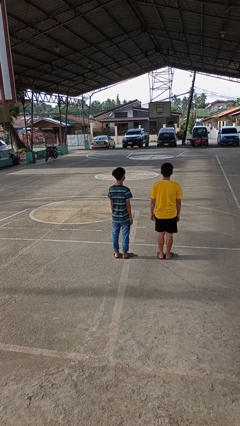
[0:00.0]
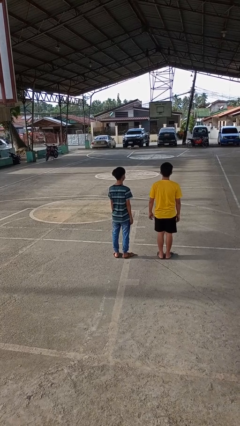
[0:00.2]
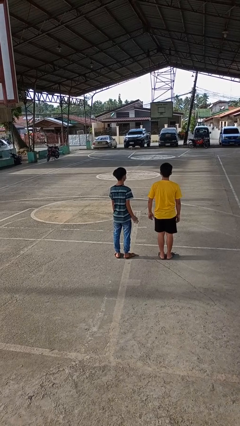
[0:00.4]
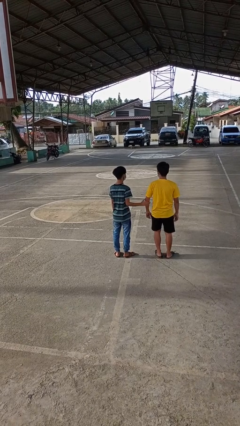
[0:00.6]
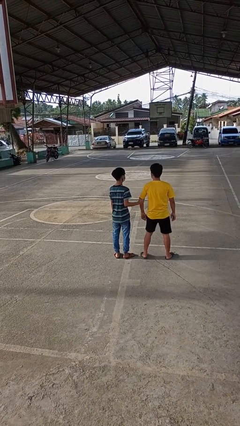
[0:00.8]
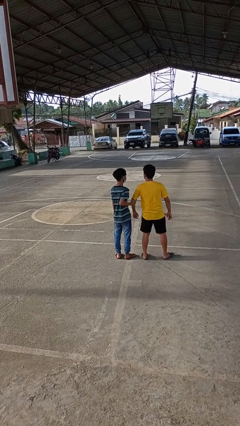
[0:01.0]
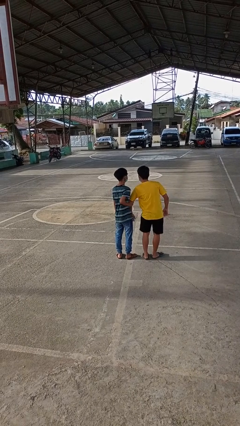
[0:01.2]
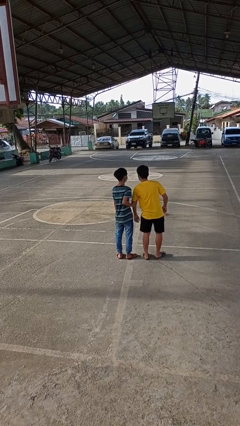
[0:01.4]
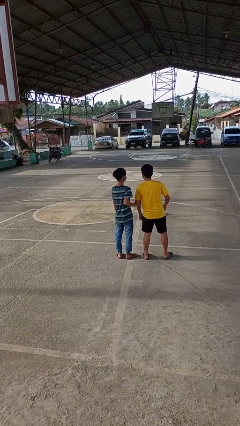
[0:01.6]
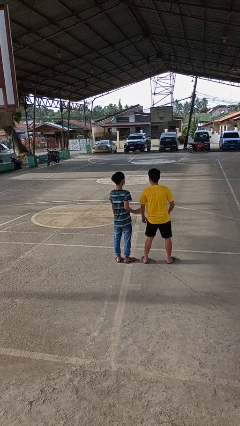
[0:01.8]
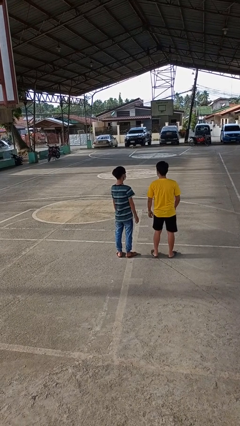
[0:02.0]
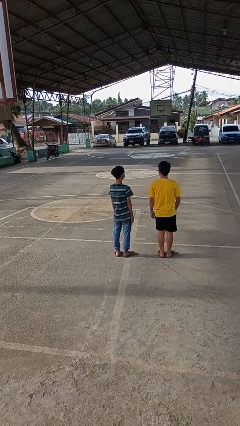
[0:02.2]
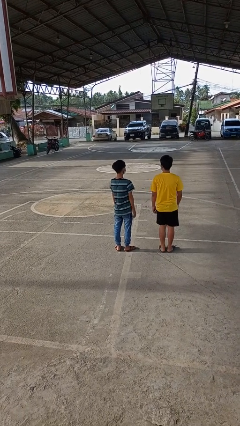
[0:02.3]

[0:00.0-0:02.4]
person grabs person by bicep

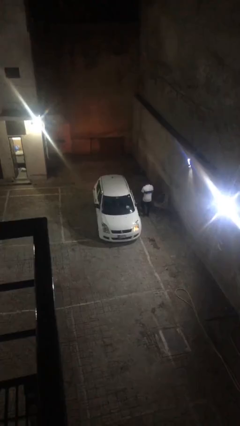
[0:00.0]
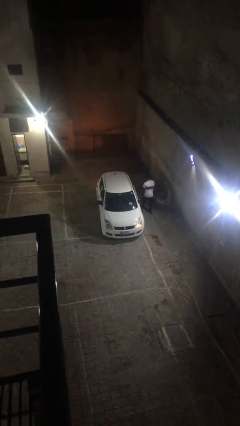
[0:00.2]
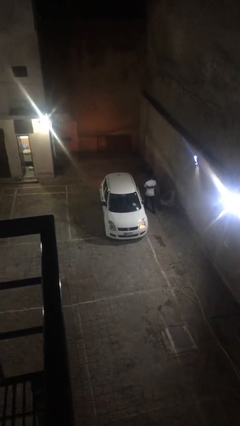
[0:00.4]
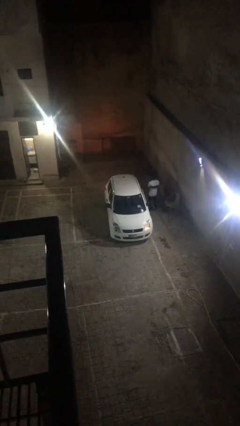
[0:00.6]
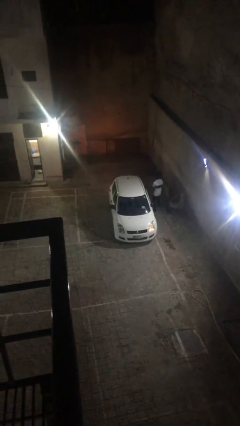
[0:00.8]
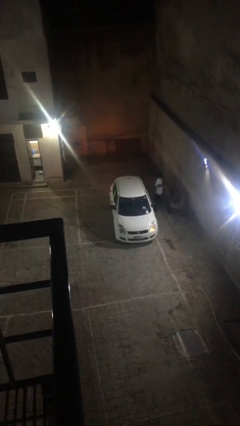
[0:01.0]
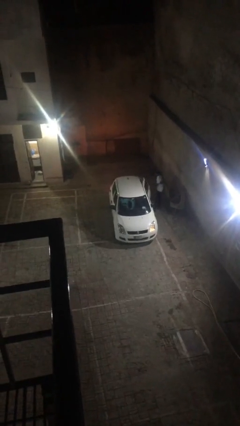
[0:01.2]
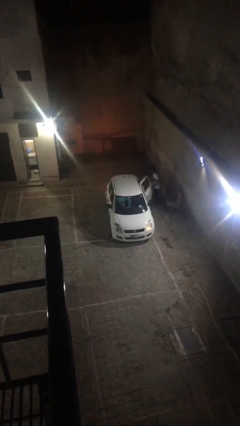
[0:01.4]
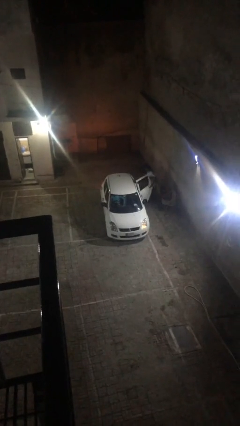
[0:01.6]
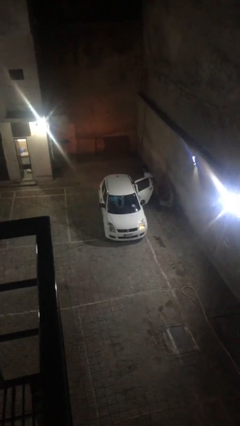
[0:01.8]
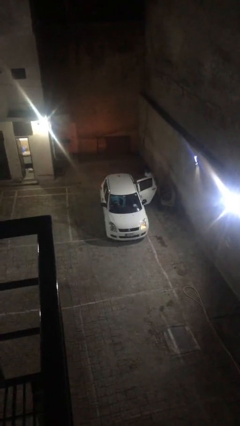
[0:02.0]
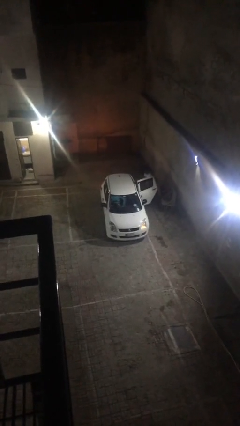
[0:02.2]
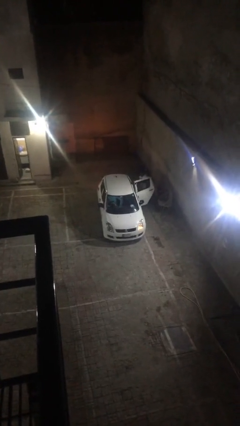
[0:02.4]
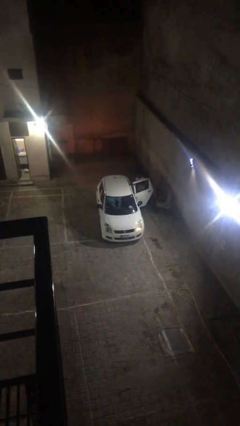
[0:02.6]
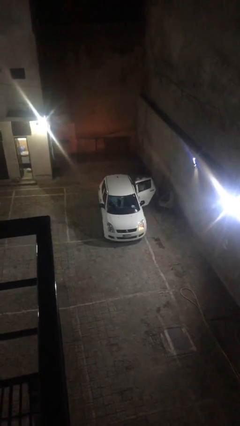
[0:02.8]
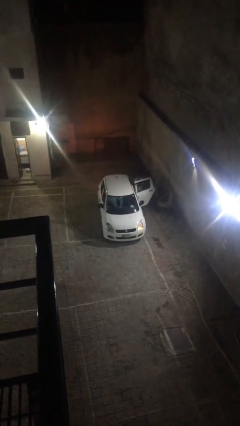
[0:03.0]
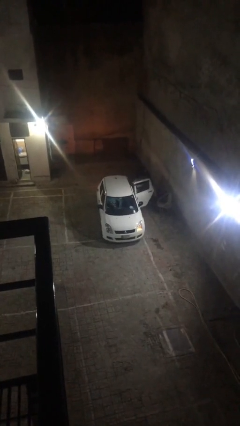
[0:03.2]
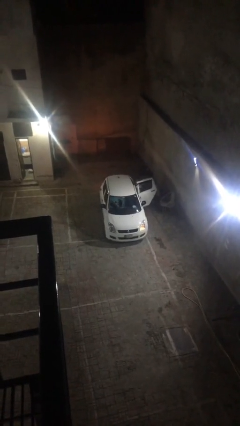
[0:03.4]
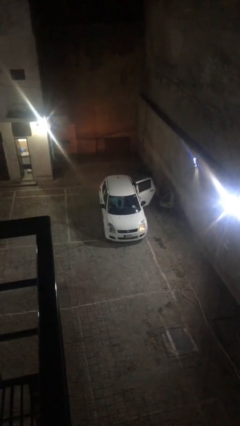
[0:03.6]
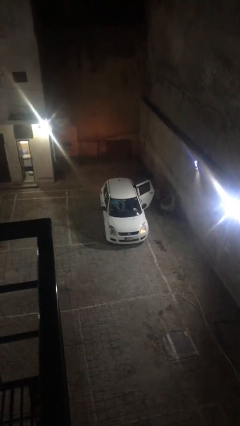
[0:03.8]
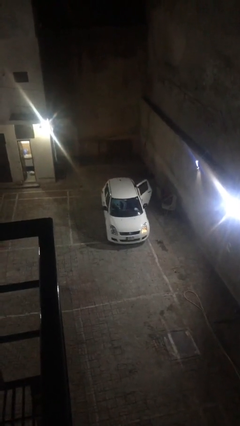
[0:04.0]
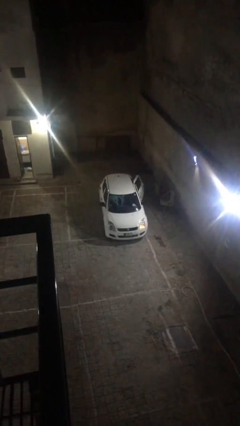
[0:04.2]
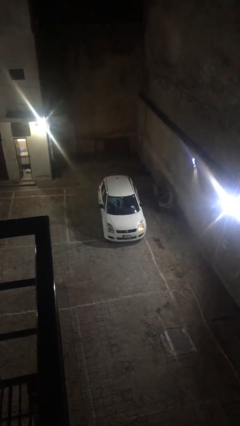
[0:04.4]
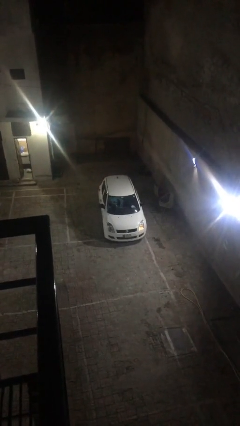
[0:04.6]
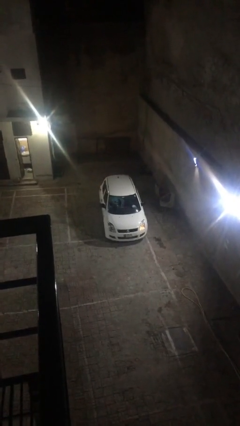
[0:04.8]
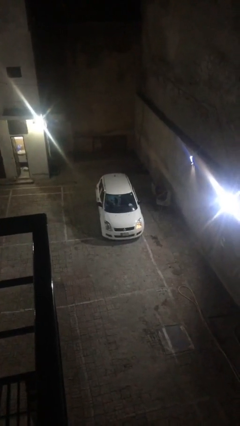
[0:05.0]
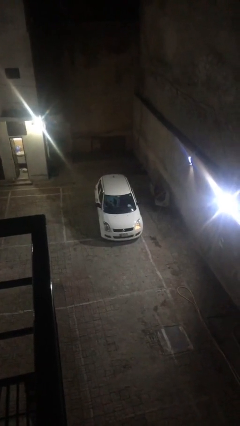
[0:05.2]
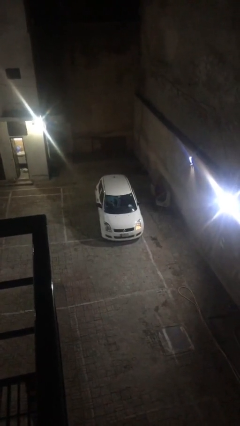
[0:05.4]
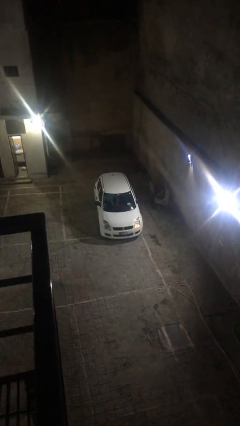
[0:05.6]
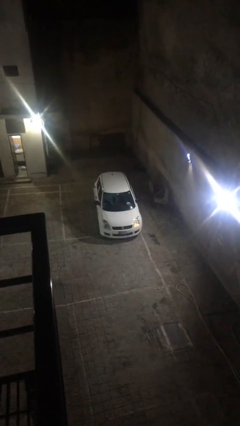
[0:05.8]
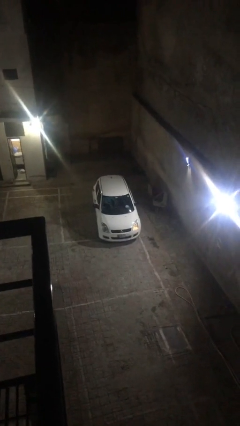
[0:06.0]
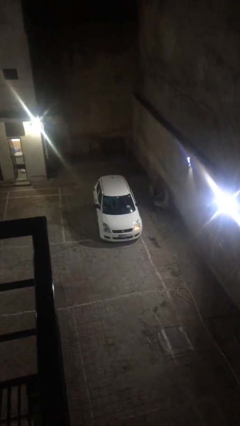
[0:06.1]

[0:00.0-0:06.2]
car picks up person

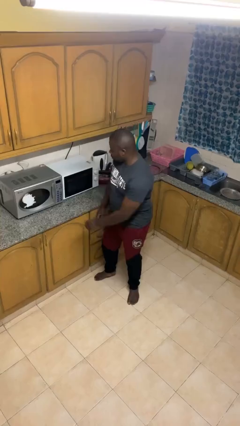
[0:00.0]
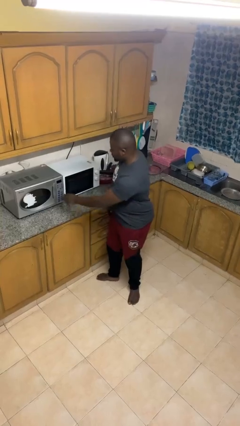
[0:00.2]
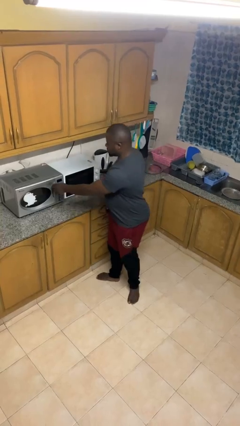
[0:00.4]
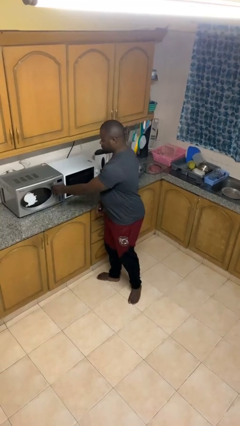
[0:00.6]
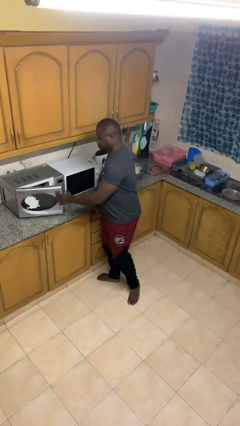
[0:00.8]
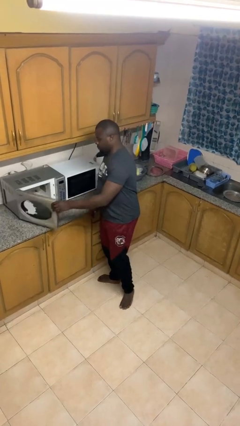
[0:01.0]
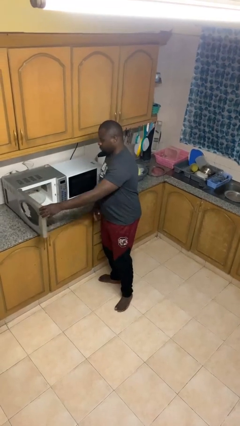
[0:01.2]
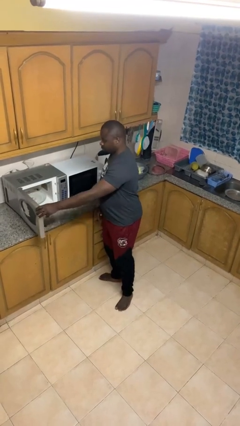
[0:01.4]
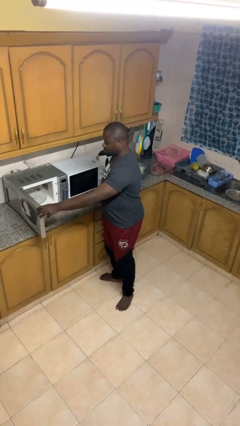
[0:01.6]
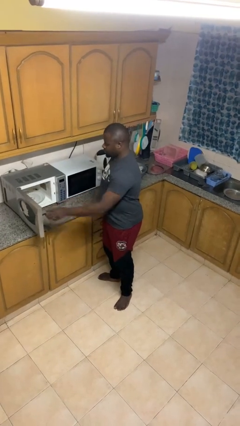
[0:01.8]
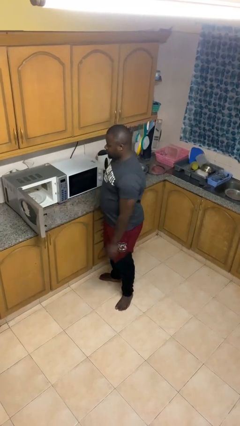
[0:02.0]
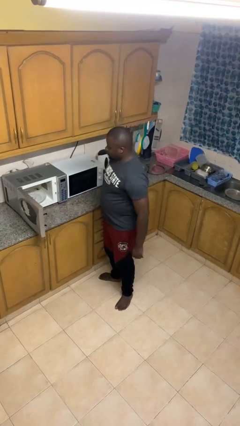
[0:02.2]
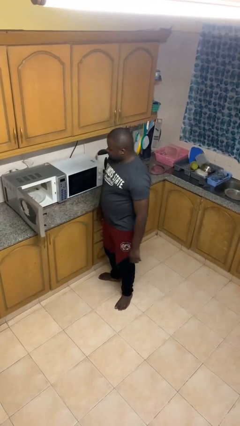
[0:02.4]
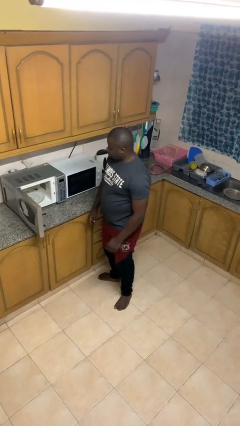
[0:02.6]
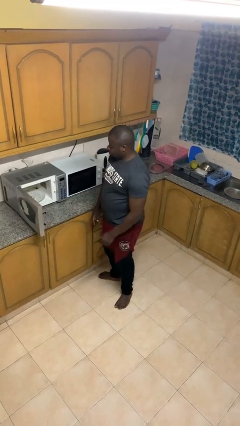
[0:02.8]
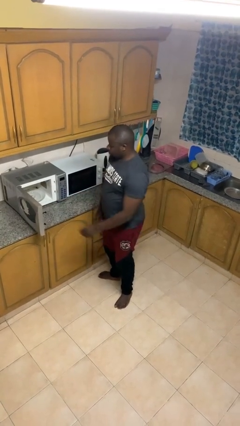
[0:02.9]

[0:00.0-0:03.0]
person opens microwave

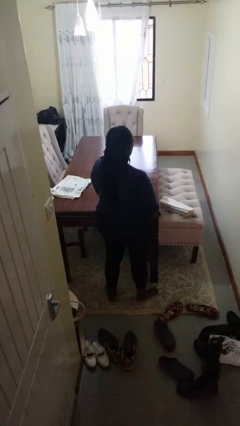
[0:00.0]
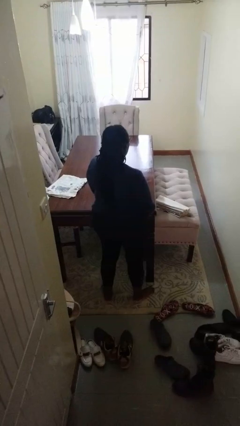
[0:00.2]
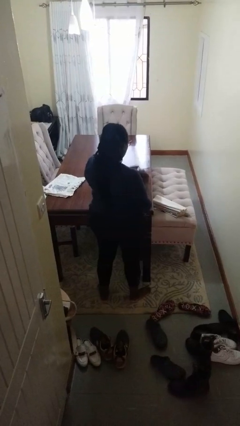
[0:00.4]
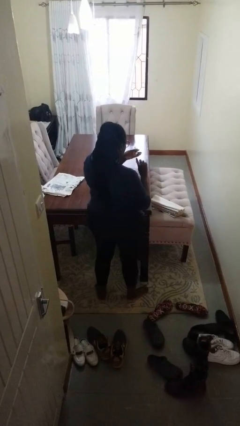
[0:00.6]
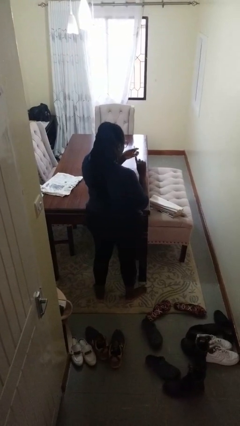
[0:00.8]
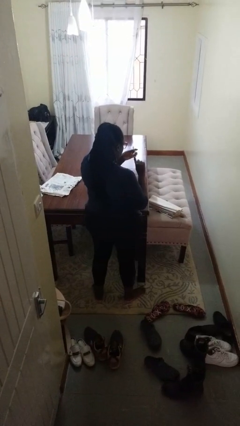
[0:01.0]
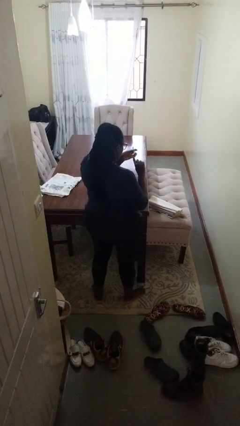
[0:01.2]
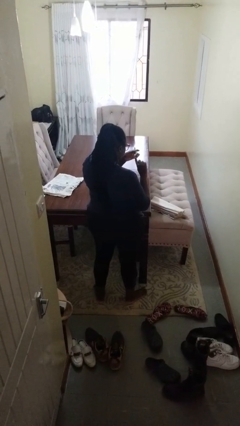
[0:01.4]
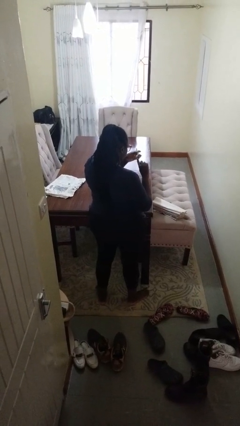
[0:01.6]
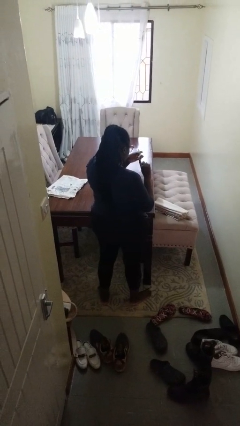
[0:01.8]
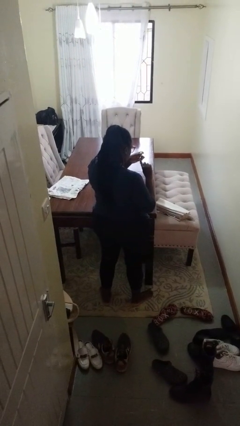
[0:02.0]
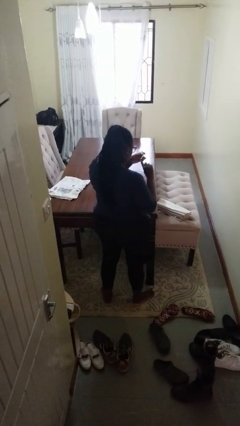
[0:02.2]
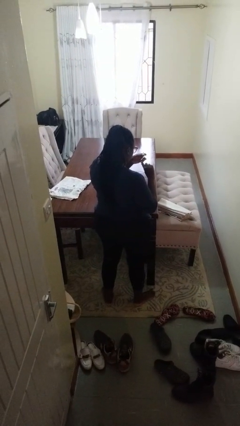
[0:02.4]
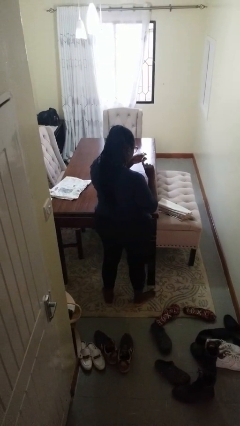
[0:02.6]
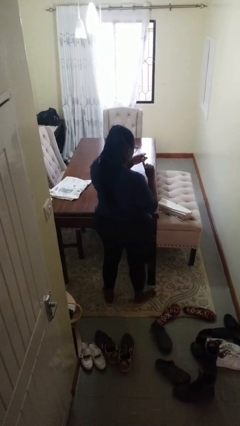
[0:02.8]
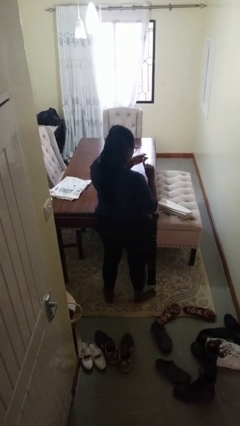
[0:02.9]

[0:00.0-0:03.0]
person clips fingernails

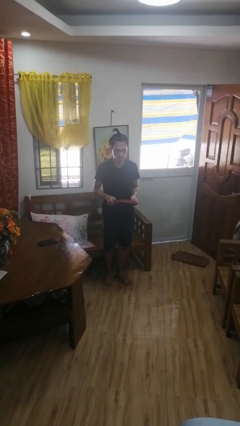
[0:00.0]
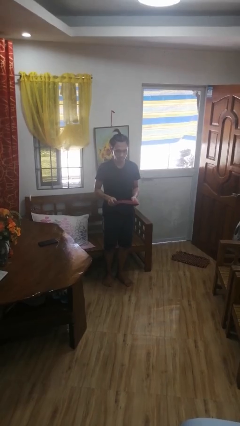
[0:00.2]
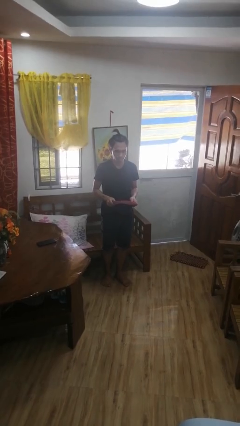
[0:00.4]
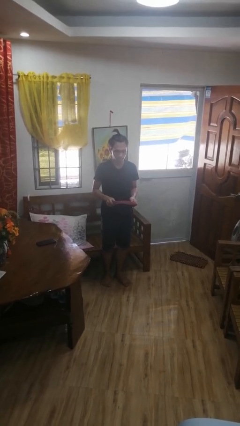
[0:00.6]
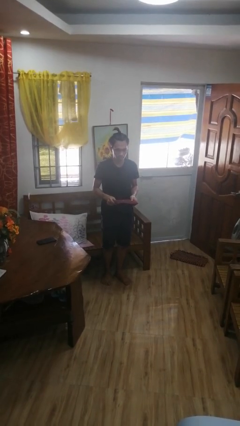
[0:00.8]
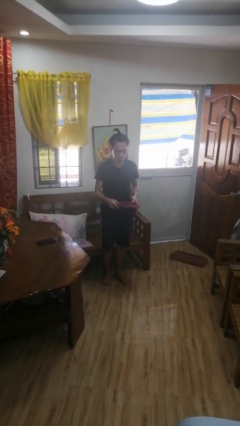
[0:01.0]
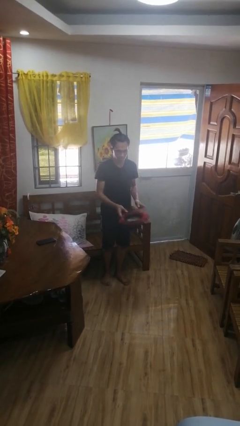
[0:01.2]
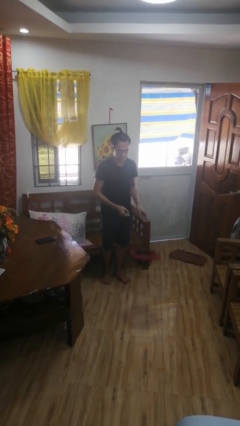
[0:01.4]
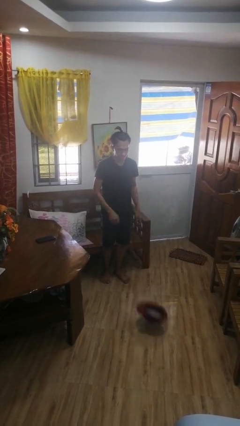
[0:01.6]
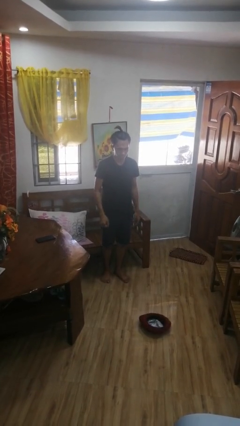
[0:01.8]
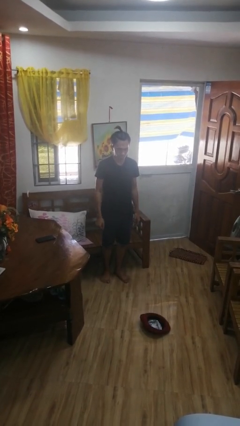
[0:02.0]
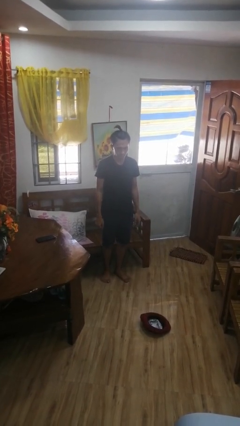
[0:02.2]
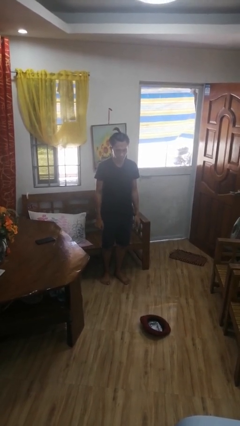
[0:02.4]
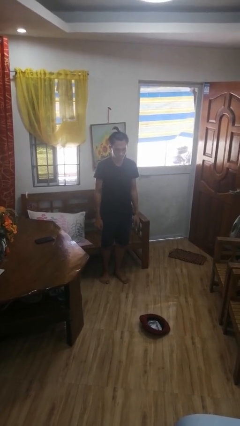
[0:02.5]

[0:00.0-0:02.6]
person throws object to ground

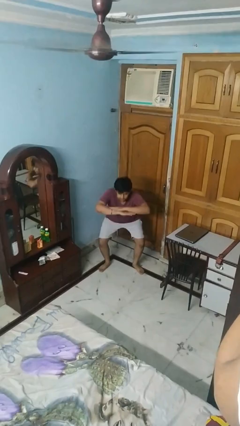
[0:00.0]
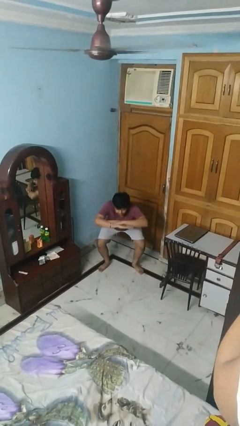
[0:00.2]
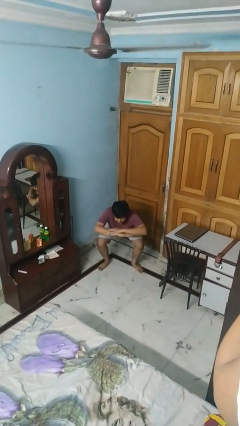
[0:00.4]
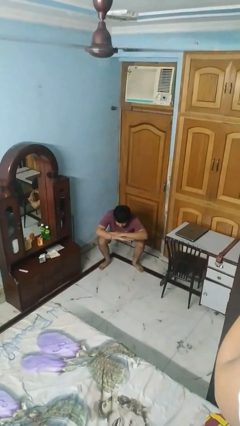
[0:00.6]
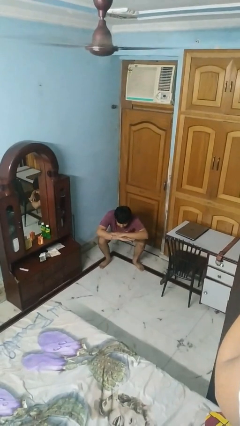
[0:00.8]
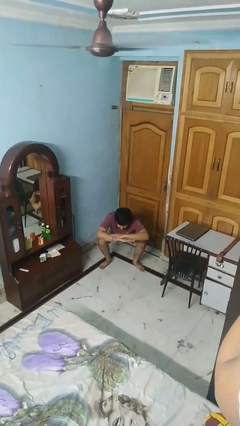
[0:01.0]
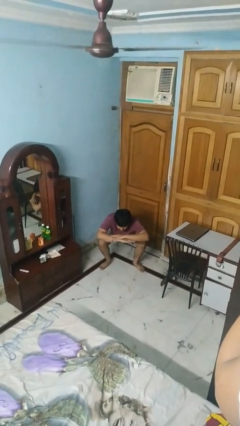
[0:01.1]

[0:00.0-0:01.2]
person squats
